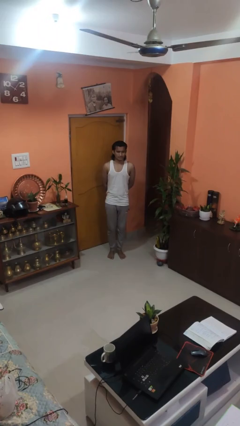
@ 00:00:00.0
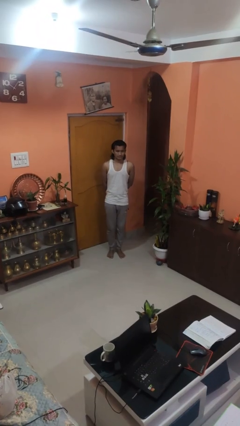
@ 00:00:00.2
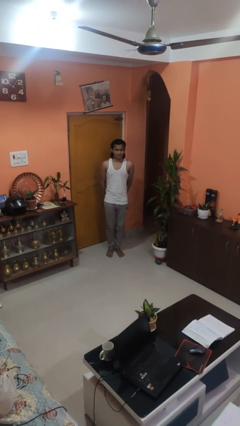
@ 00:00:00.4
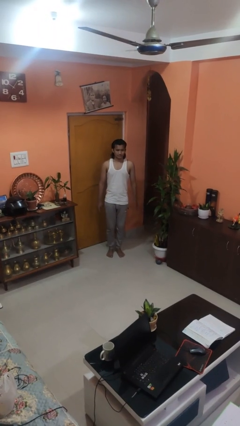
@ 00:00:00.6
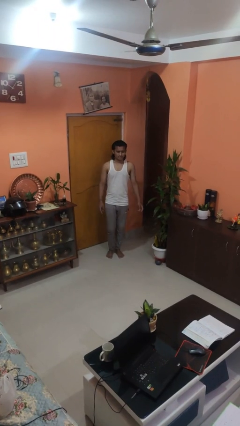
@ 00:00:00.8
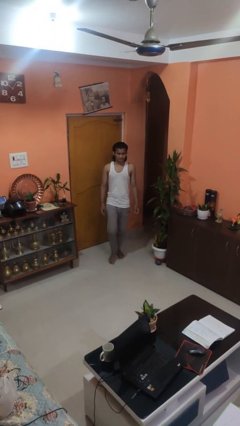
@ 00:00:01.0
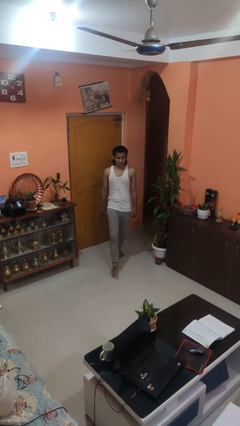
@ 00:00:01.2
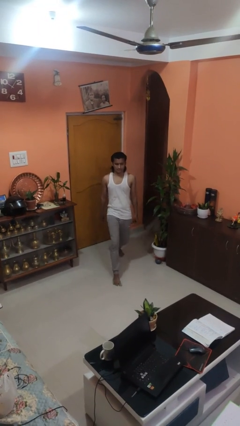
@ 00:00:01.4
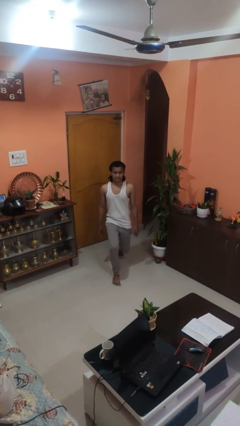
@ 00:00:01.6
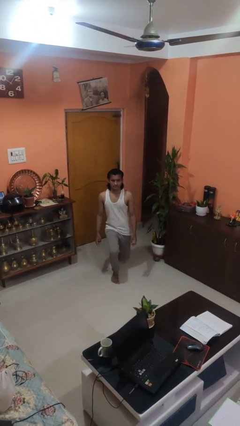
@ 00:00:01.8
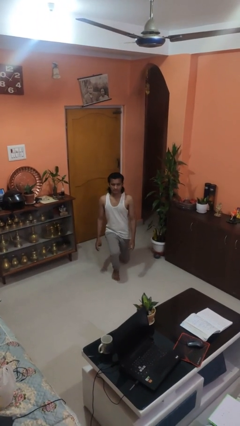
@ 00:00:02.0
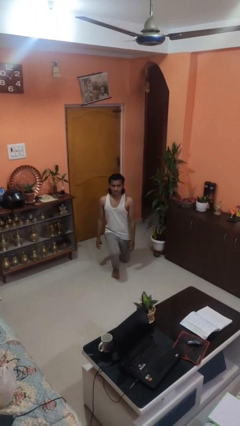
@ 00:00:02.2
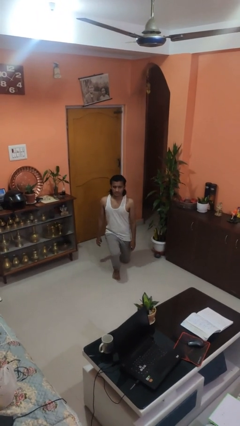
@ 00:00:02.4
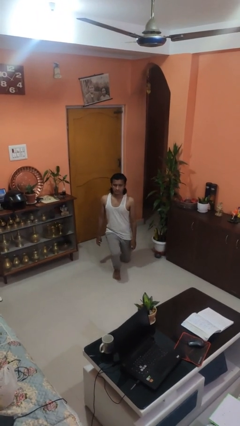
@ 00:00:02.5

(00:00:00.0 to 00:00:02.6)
person kneels

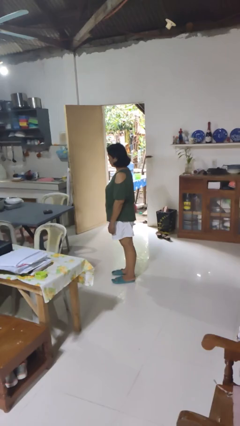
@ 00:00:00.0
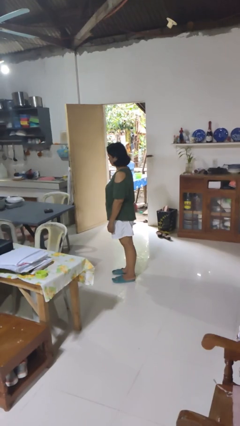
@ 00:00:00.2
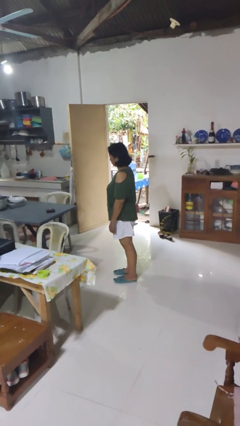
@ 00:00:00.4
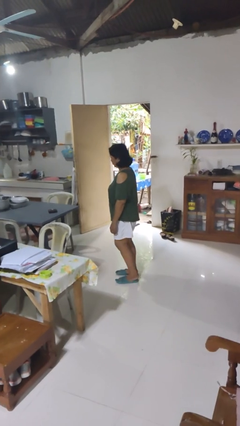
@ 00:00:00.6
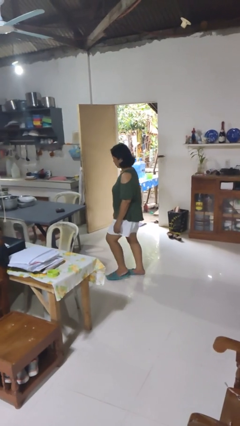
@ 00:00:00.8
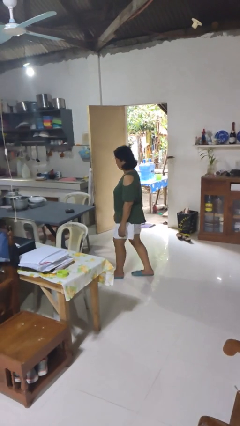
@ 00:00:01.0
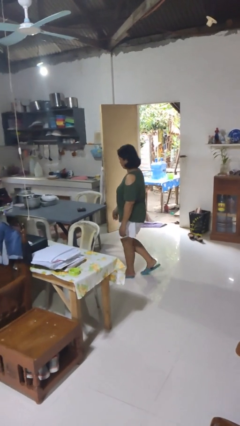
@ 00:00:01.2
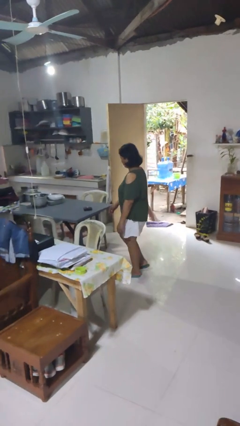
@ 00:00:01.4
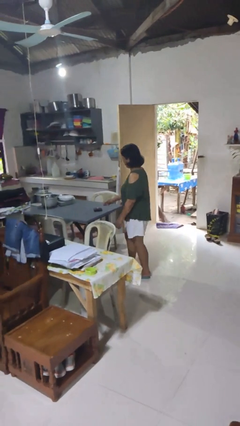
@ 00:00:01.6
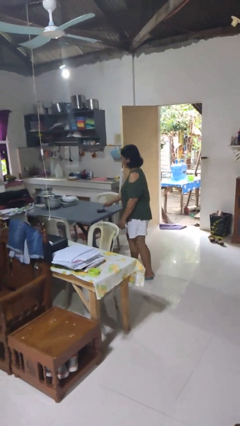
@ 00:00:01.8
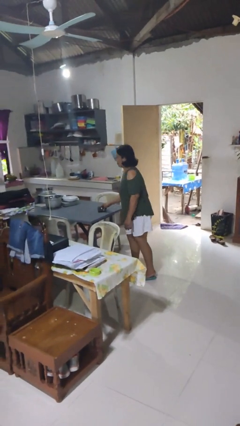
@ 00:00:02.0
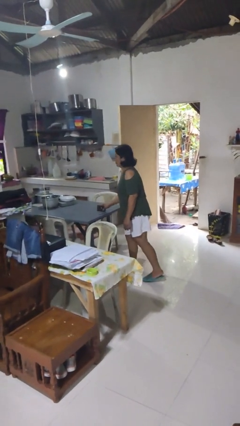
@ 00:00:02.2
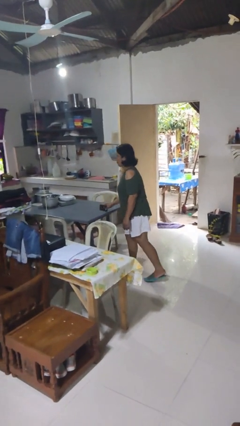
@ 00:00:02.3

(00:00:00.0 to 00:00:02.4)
person picks up object from table

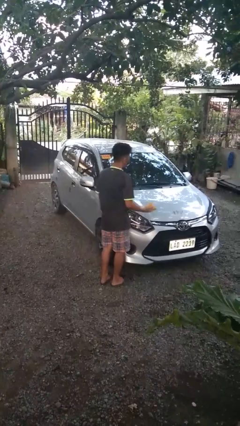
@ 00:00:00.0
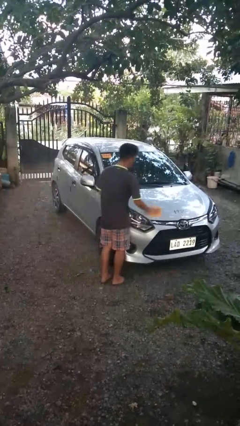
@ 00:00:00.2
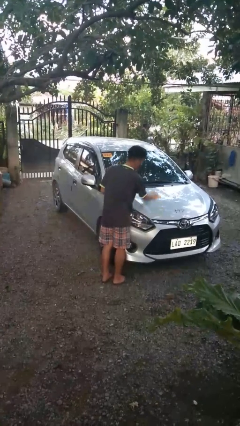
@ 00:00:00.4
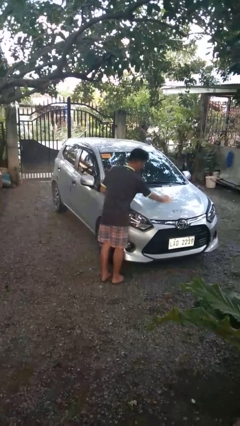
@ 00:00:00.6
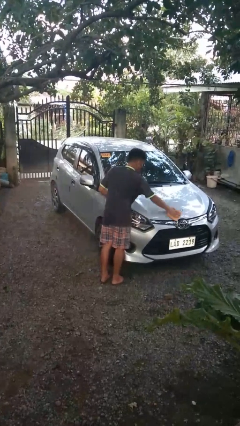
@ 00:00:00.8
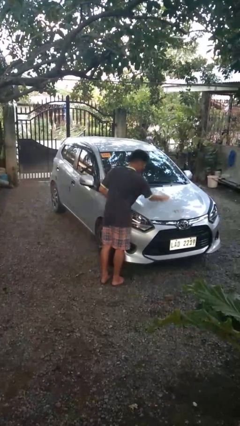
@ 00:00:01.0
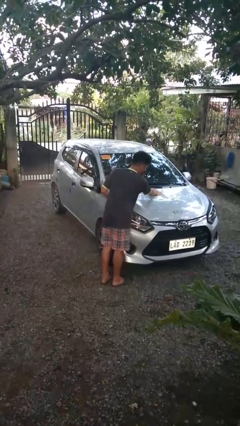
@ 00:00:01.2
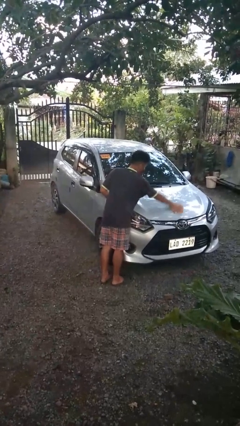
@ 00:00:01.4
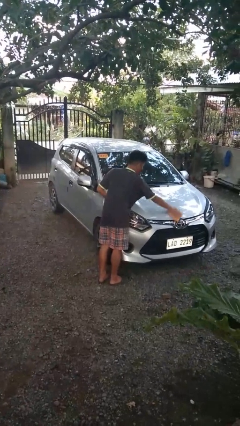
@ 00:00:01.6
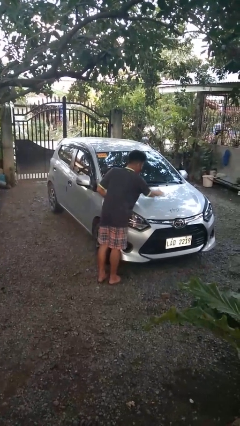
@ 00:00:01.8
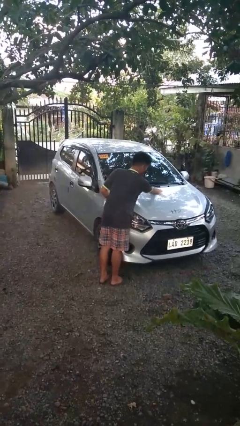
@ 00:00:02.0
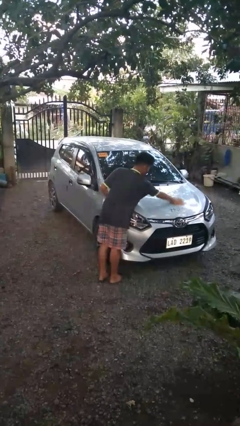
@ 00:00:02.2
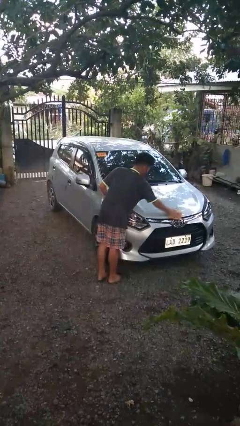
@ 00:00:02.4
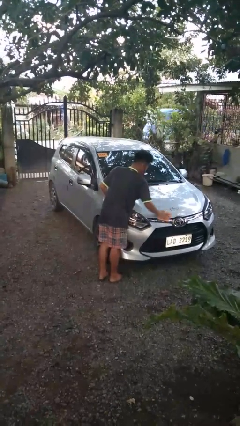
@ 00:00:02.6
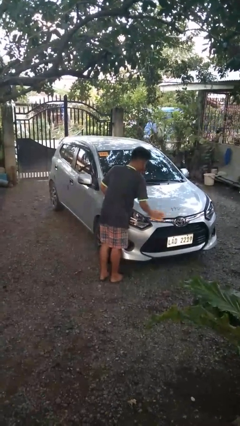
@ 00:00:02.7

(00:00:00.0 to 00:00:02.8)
person polishes car with rag

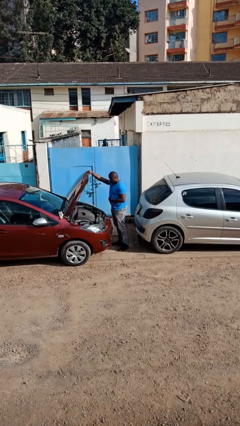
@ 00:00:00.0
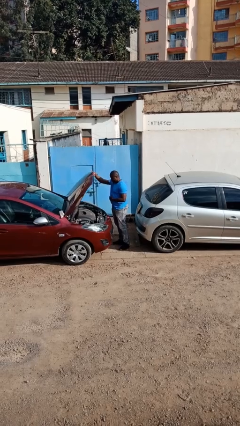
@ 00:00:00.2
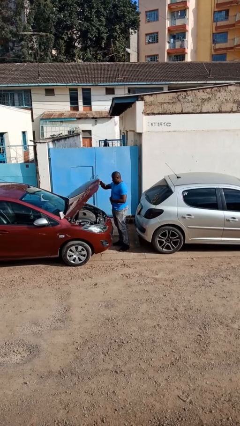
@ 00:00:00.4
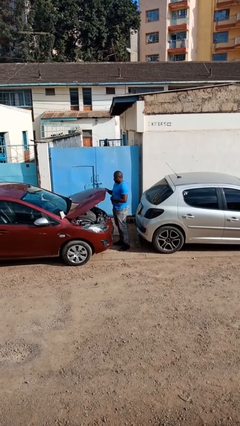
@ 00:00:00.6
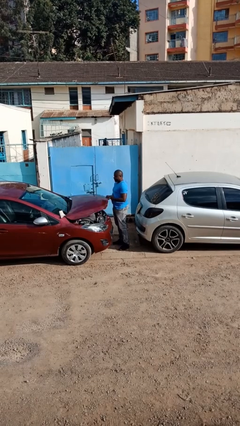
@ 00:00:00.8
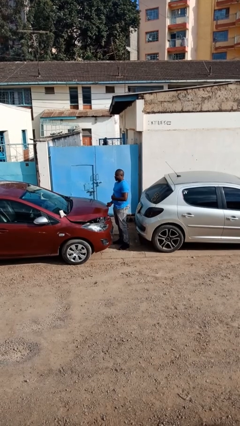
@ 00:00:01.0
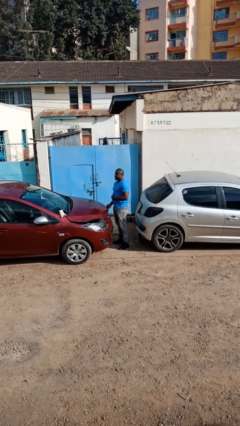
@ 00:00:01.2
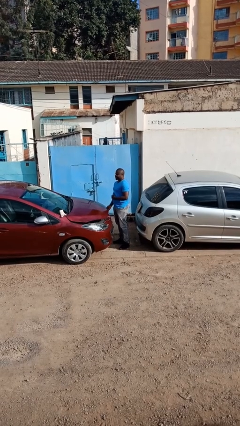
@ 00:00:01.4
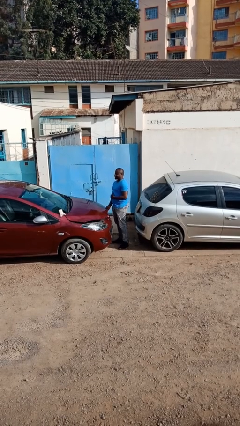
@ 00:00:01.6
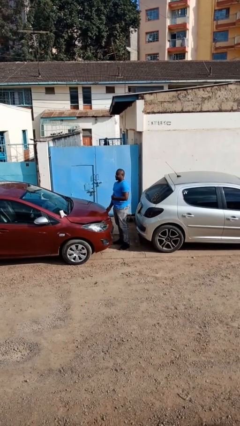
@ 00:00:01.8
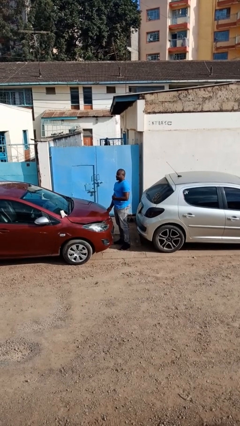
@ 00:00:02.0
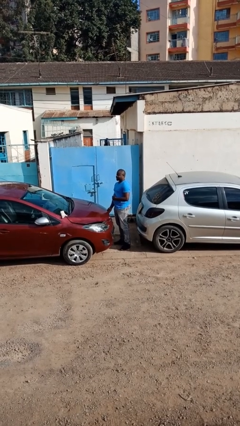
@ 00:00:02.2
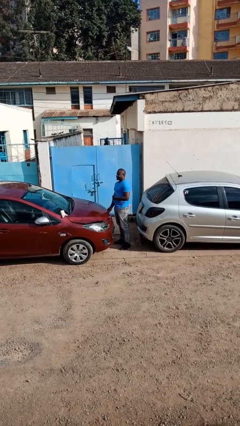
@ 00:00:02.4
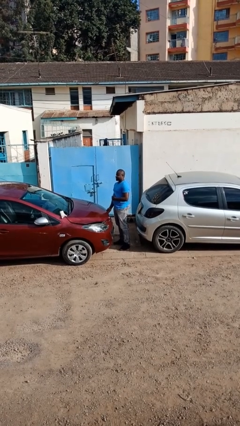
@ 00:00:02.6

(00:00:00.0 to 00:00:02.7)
person closes car hood

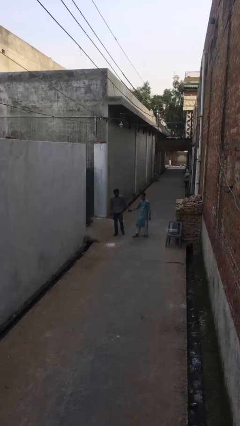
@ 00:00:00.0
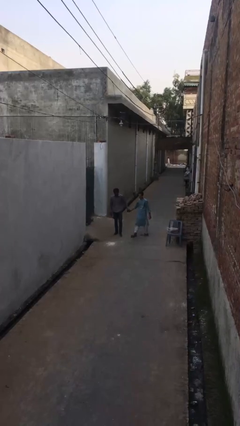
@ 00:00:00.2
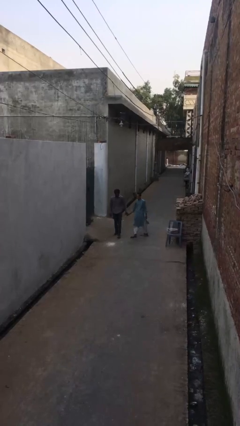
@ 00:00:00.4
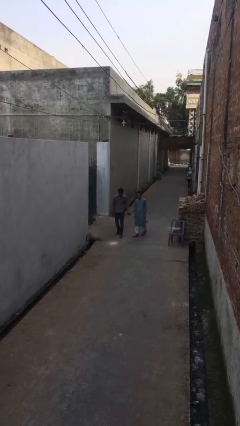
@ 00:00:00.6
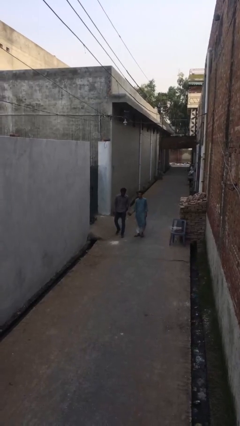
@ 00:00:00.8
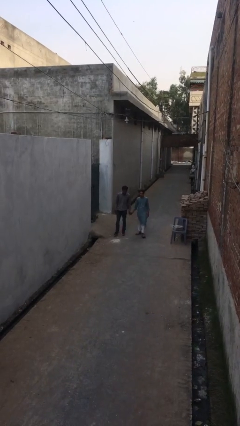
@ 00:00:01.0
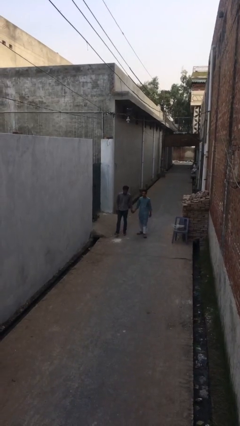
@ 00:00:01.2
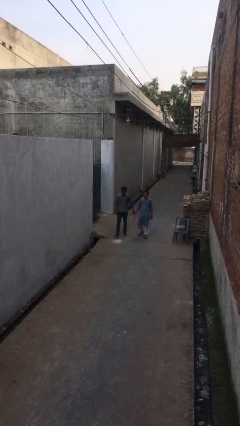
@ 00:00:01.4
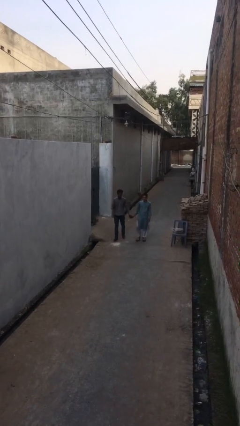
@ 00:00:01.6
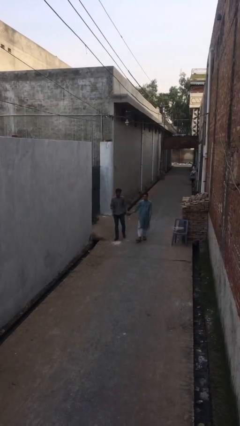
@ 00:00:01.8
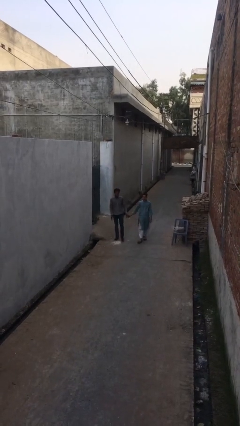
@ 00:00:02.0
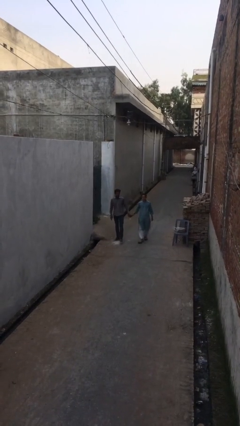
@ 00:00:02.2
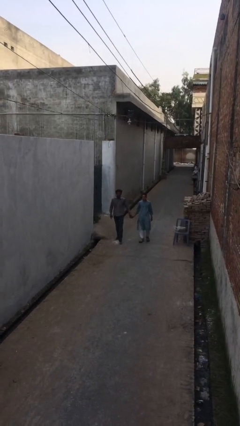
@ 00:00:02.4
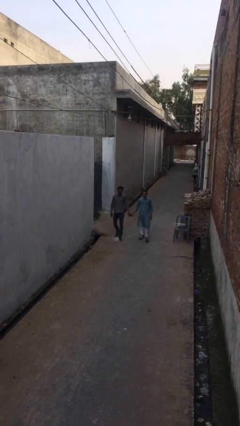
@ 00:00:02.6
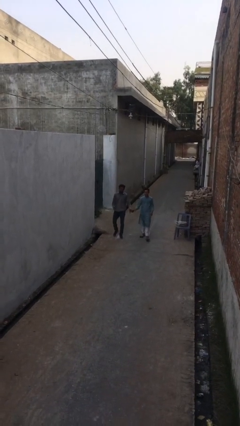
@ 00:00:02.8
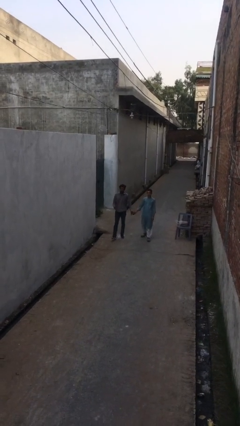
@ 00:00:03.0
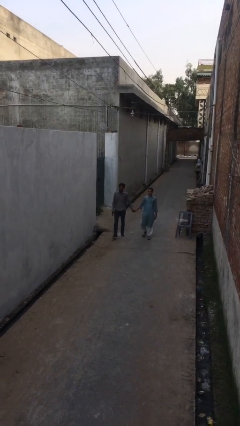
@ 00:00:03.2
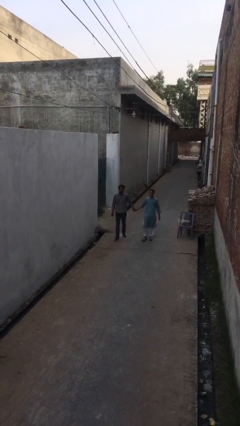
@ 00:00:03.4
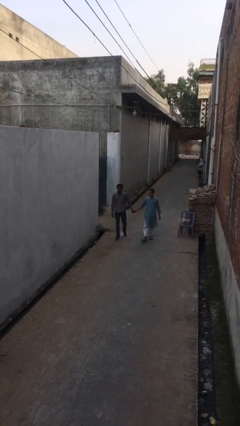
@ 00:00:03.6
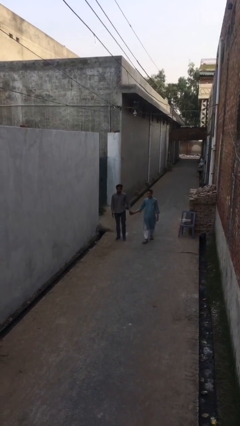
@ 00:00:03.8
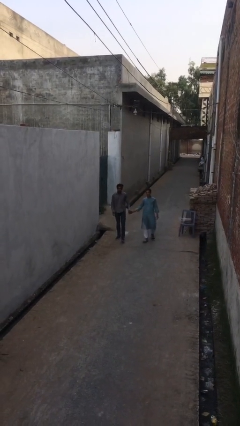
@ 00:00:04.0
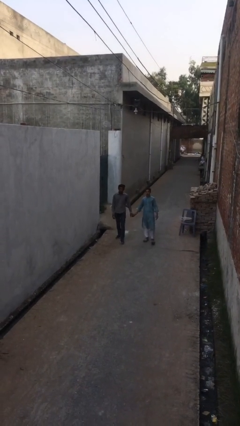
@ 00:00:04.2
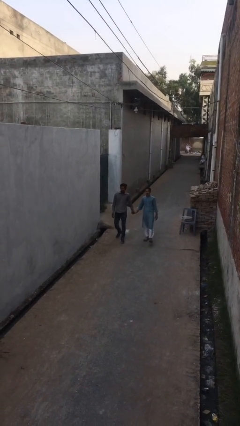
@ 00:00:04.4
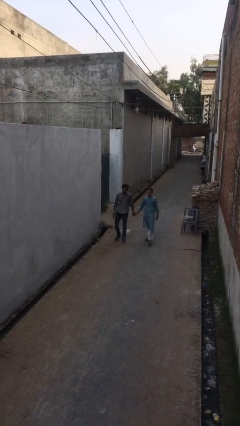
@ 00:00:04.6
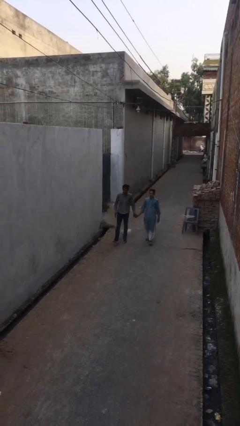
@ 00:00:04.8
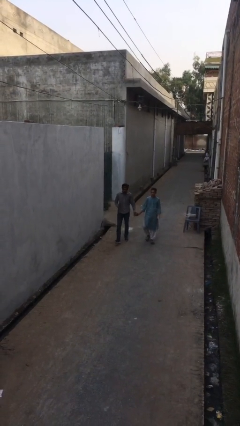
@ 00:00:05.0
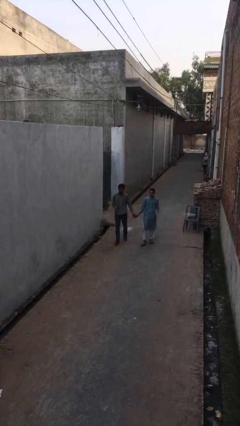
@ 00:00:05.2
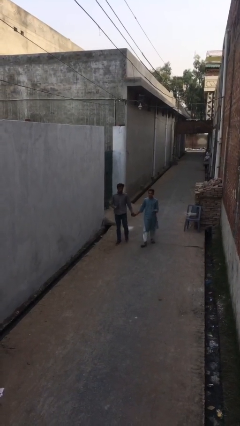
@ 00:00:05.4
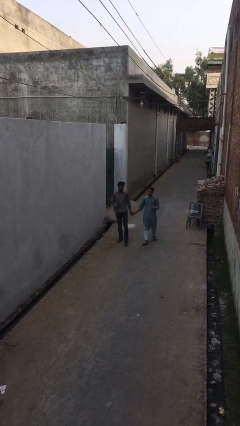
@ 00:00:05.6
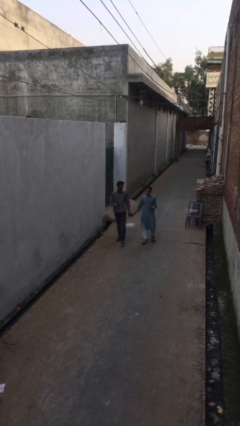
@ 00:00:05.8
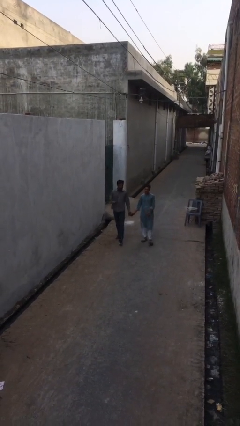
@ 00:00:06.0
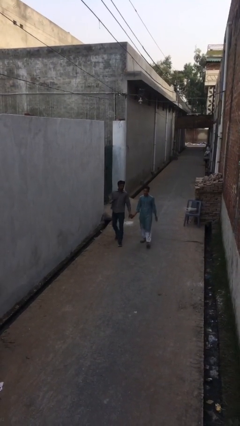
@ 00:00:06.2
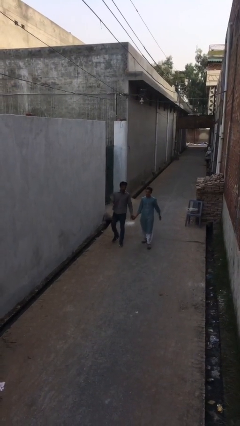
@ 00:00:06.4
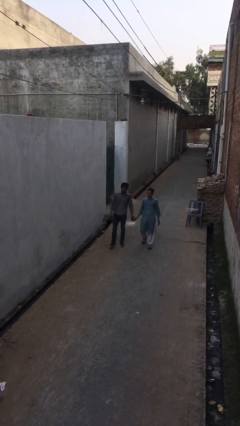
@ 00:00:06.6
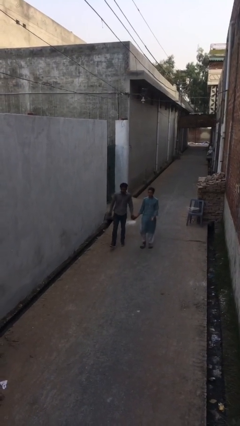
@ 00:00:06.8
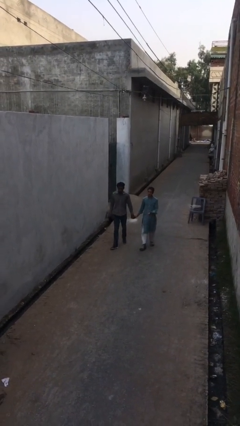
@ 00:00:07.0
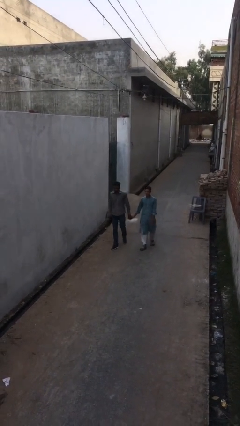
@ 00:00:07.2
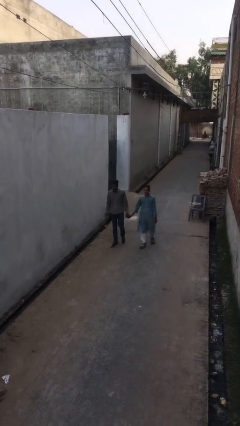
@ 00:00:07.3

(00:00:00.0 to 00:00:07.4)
person holds hand
